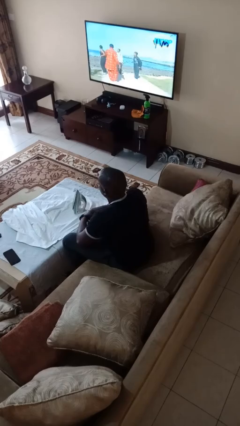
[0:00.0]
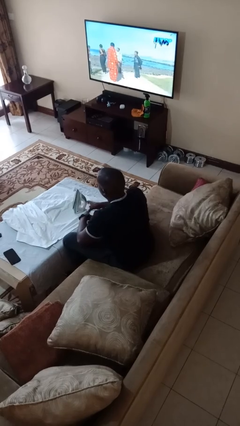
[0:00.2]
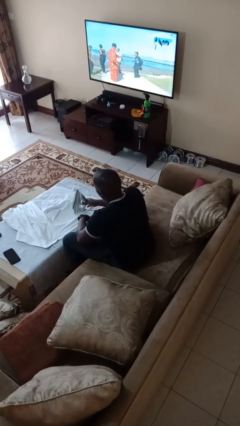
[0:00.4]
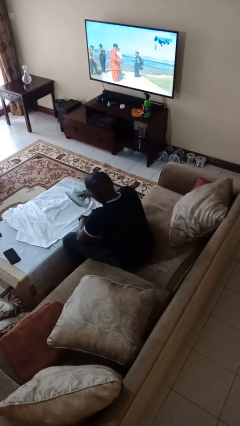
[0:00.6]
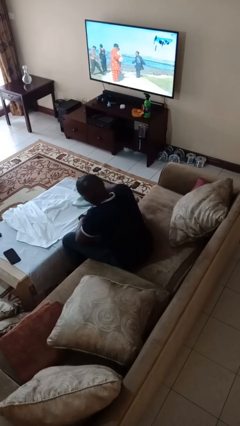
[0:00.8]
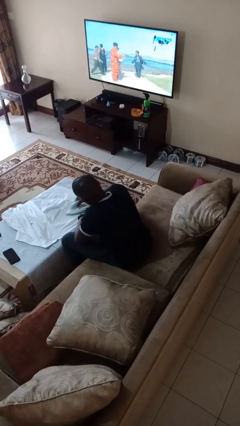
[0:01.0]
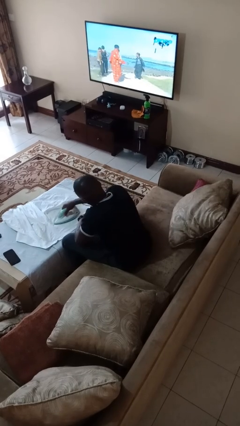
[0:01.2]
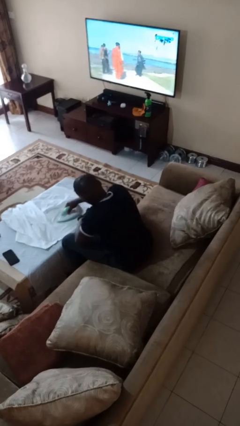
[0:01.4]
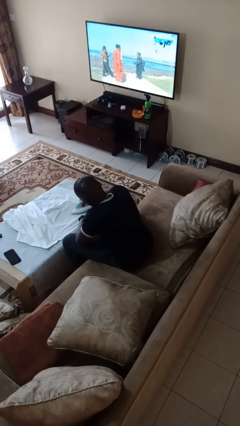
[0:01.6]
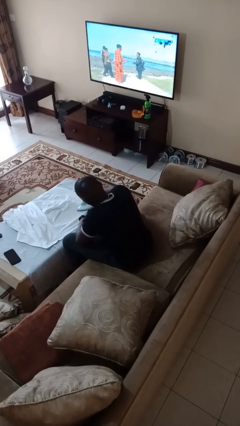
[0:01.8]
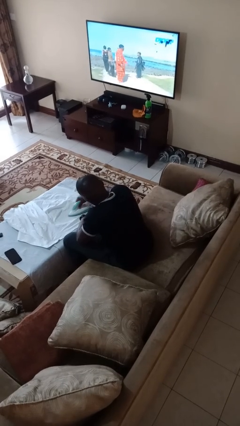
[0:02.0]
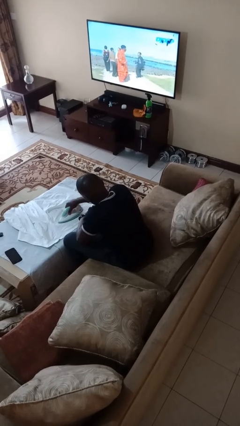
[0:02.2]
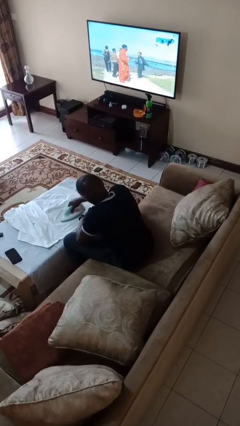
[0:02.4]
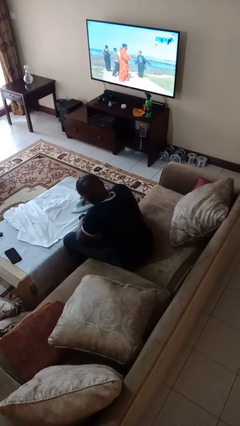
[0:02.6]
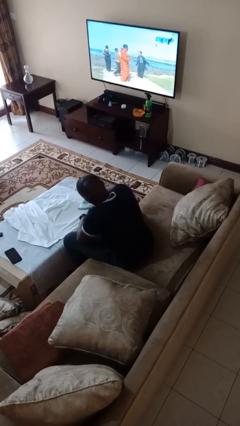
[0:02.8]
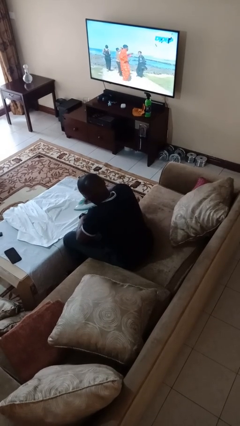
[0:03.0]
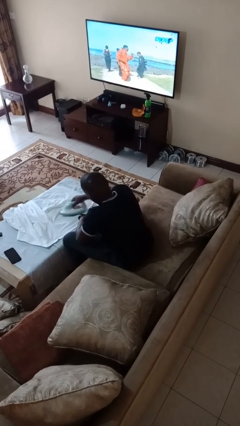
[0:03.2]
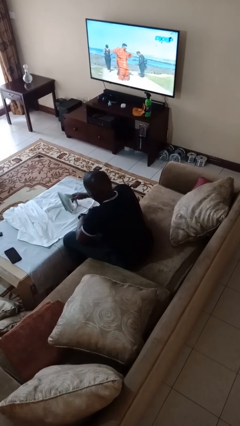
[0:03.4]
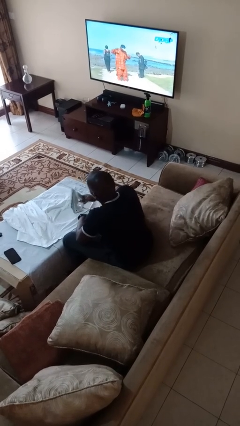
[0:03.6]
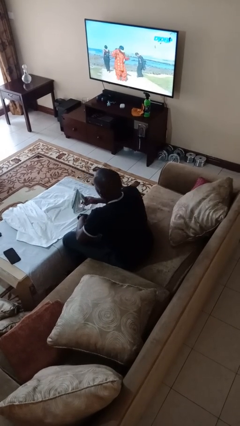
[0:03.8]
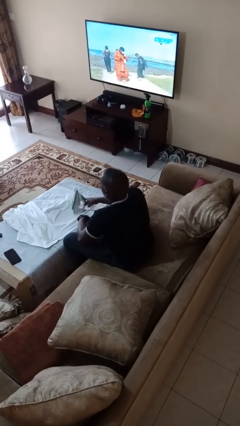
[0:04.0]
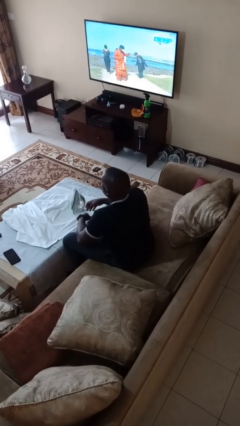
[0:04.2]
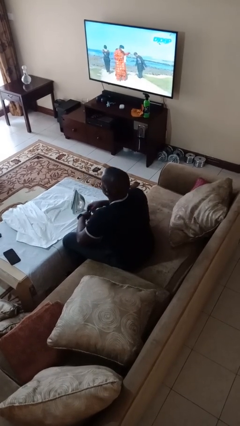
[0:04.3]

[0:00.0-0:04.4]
person irons clothes

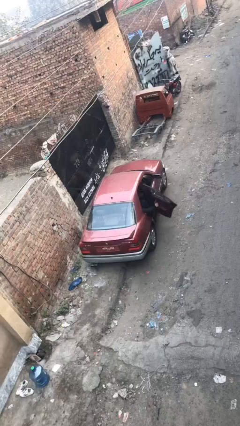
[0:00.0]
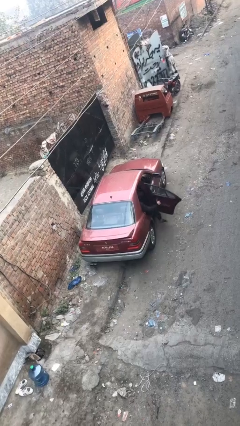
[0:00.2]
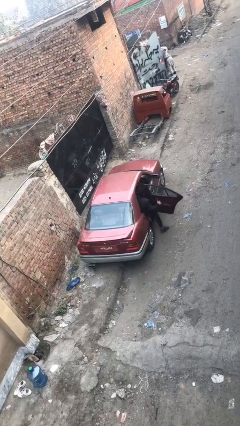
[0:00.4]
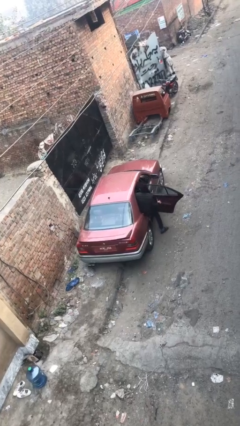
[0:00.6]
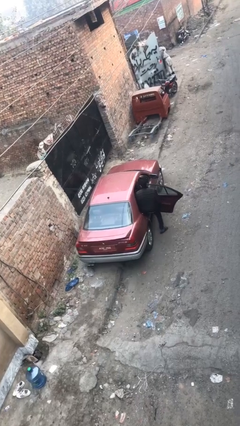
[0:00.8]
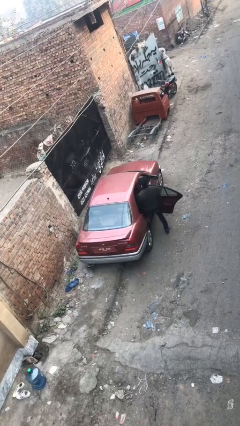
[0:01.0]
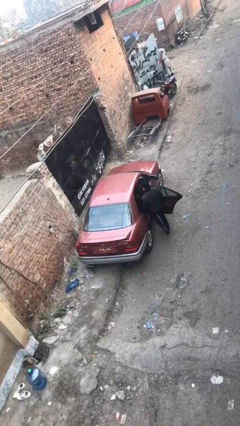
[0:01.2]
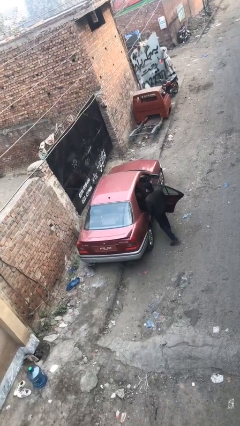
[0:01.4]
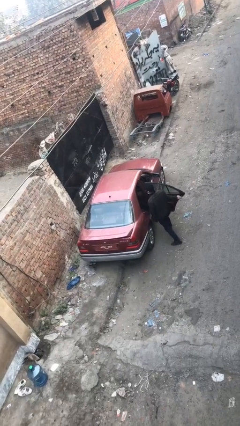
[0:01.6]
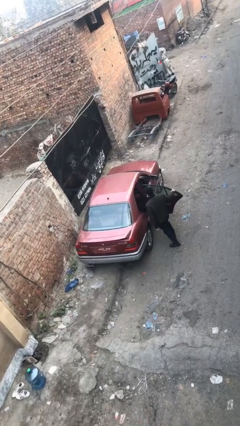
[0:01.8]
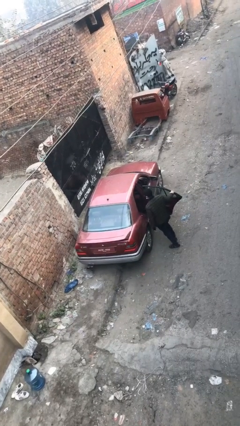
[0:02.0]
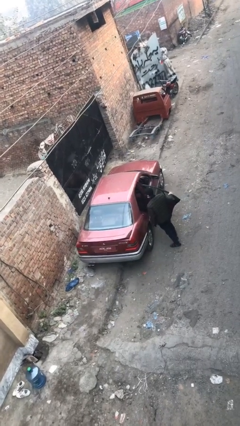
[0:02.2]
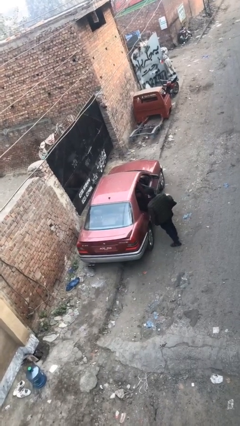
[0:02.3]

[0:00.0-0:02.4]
car drops off person

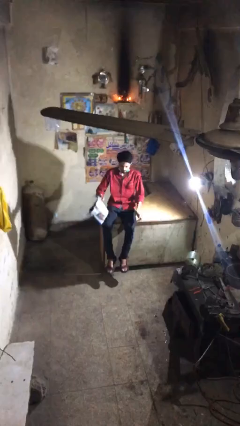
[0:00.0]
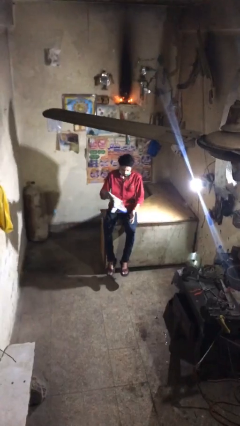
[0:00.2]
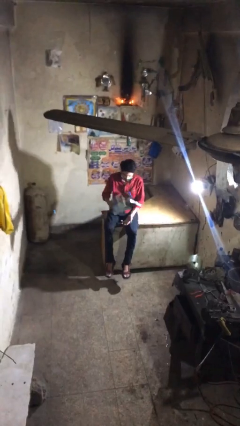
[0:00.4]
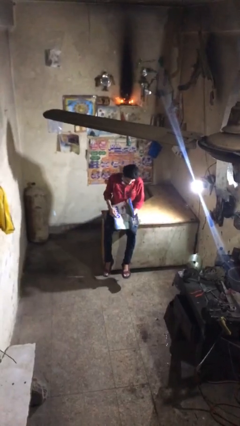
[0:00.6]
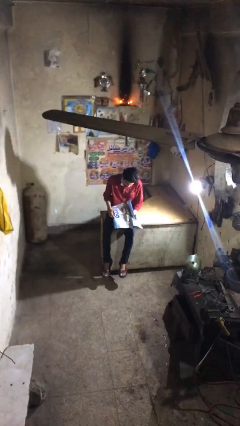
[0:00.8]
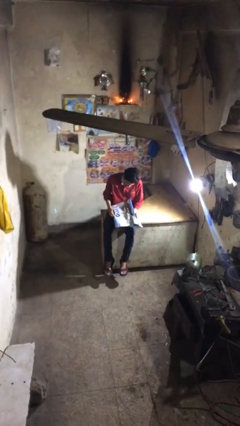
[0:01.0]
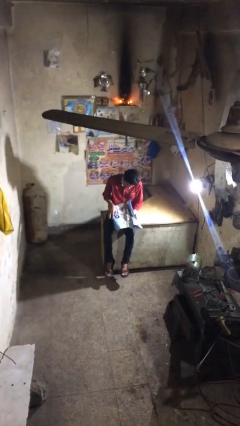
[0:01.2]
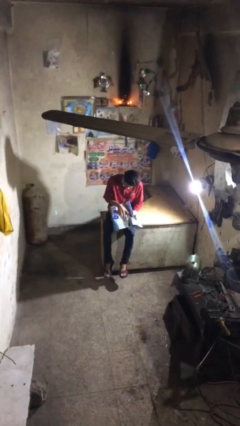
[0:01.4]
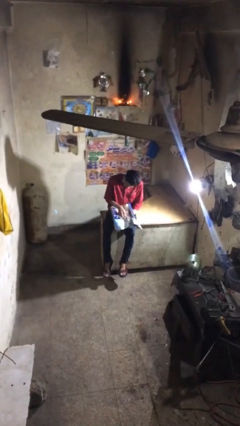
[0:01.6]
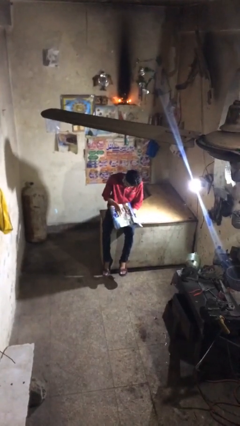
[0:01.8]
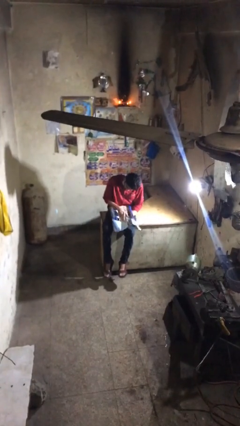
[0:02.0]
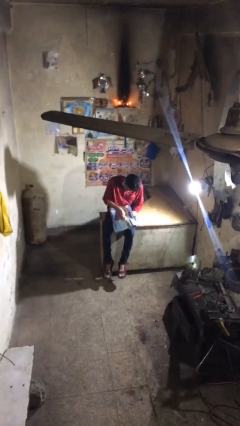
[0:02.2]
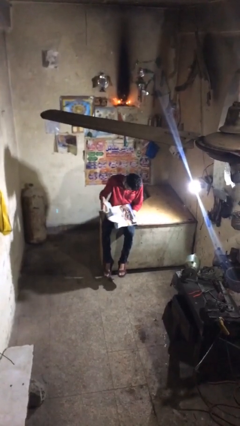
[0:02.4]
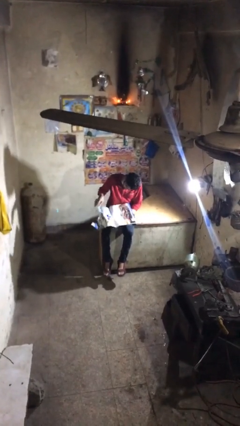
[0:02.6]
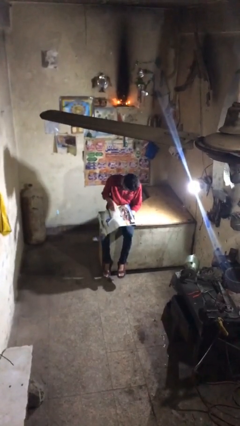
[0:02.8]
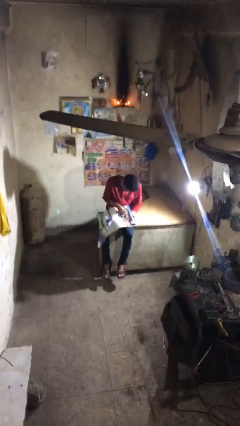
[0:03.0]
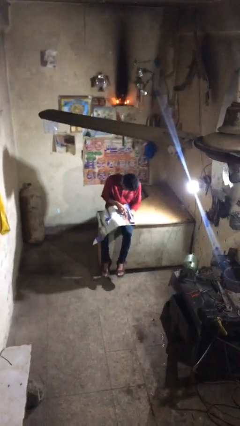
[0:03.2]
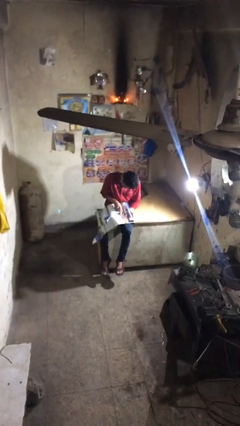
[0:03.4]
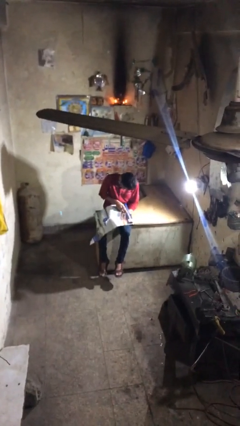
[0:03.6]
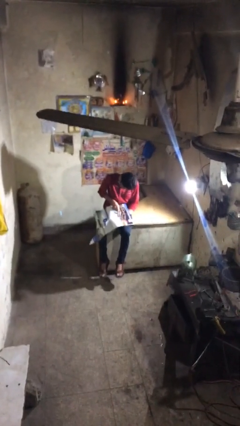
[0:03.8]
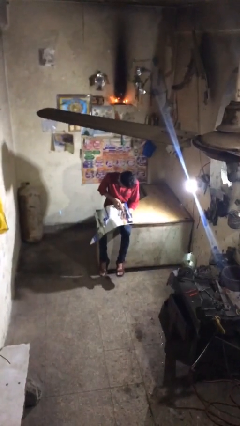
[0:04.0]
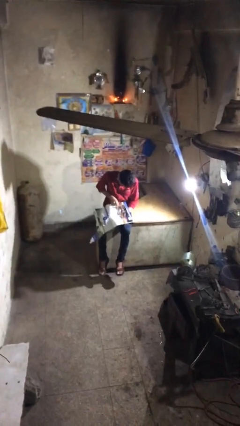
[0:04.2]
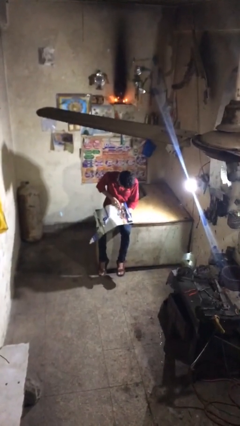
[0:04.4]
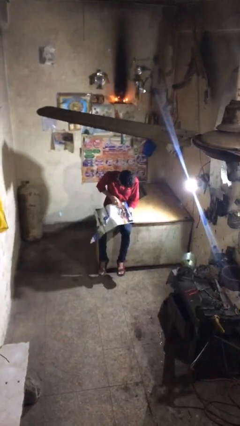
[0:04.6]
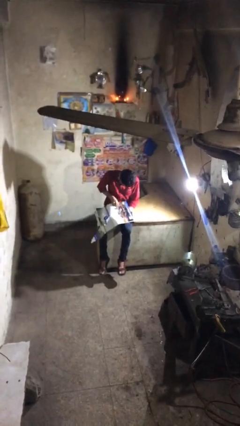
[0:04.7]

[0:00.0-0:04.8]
person reads document

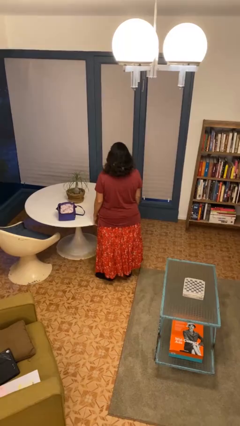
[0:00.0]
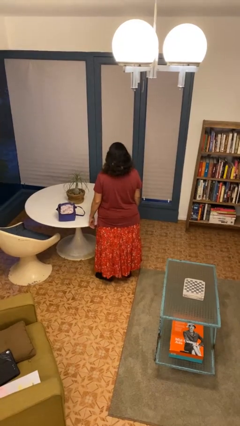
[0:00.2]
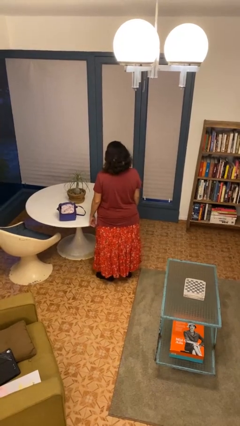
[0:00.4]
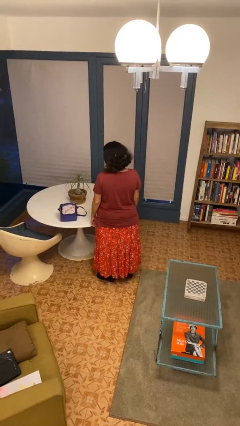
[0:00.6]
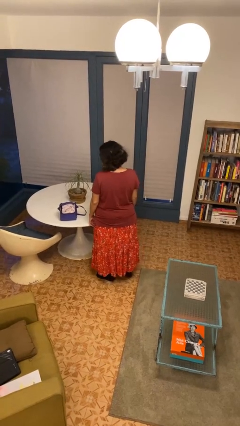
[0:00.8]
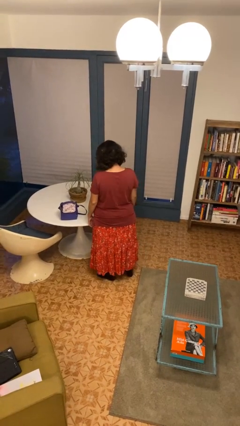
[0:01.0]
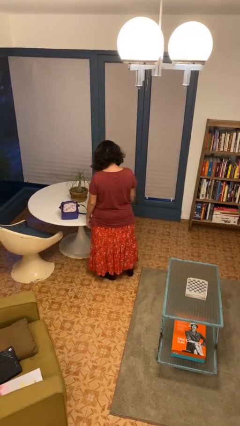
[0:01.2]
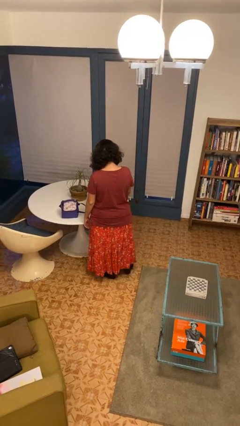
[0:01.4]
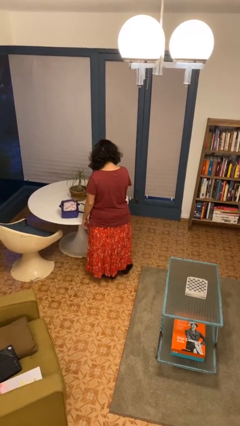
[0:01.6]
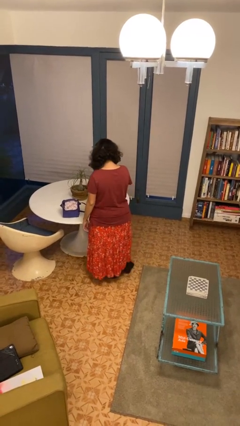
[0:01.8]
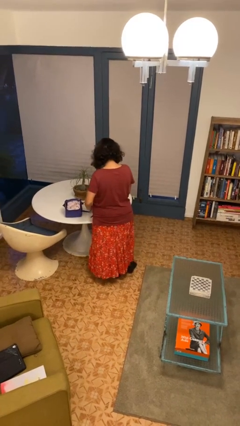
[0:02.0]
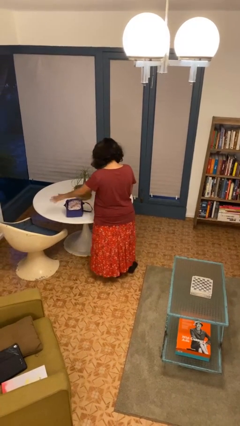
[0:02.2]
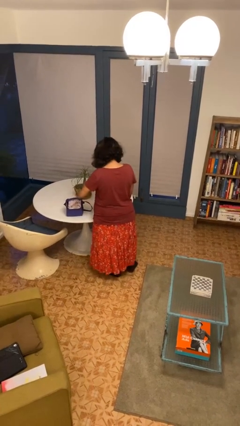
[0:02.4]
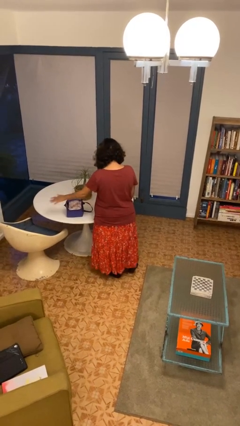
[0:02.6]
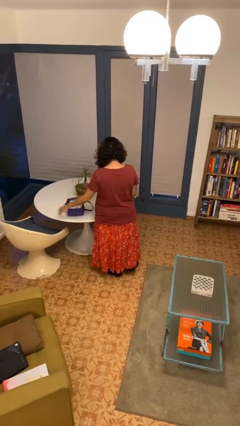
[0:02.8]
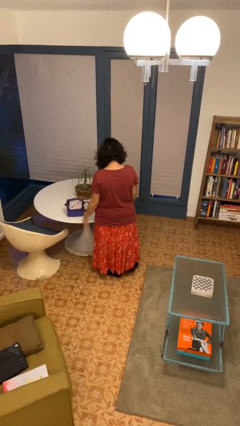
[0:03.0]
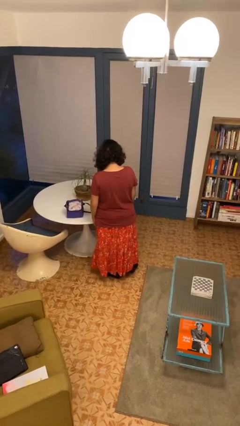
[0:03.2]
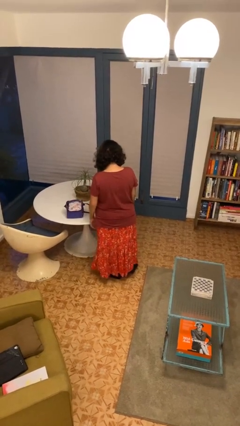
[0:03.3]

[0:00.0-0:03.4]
person waves hand over object

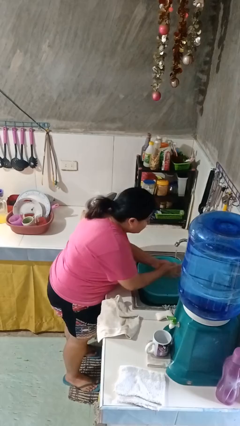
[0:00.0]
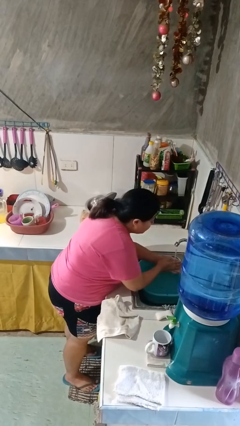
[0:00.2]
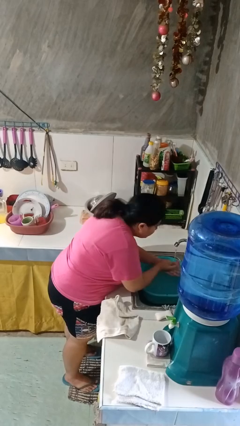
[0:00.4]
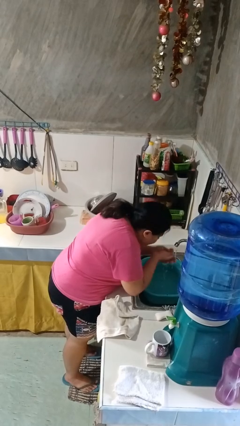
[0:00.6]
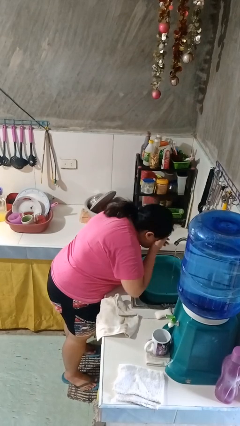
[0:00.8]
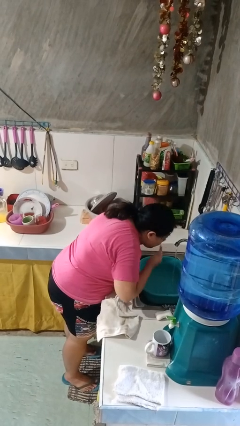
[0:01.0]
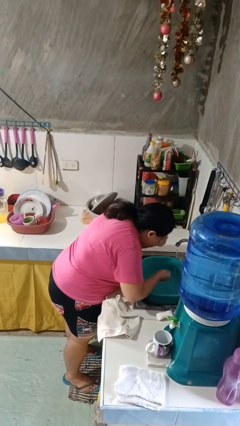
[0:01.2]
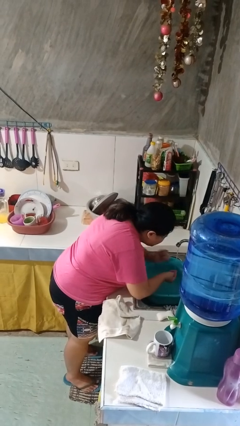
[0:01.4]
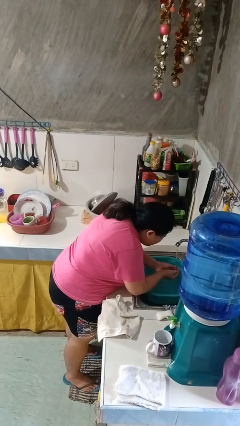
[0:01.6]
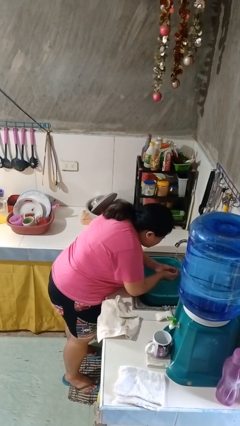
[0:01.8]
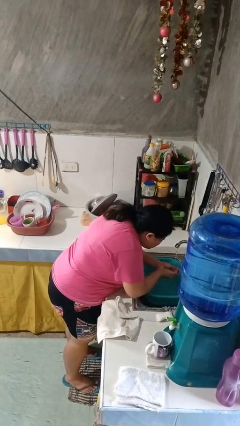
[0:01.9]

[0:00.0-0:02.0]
person washes face

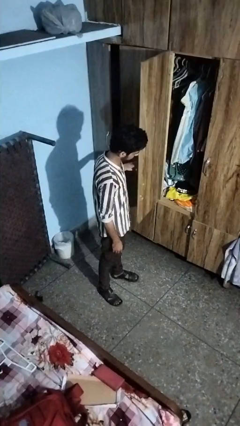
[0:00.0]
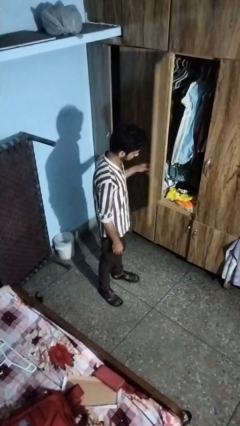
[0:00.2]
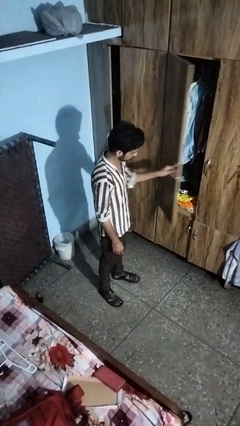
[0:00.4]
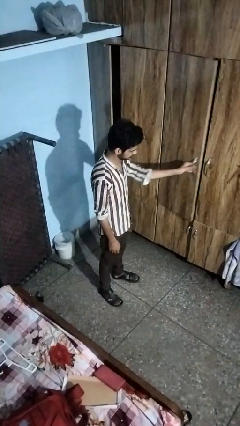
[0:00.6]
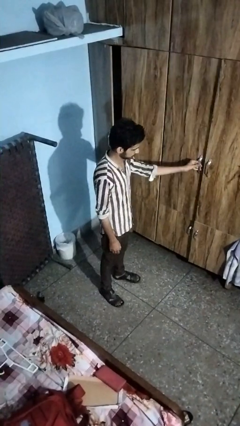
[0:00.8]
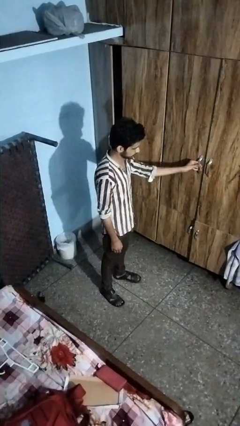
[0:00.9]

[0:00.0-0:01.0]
person closes closet door
